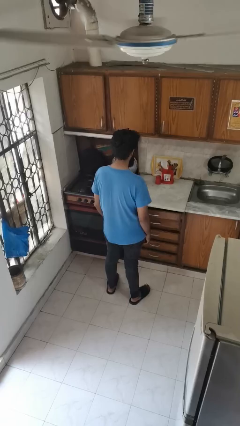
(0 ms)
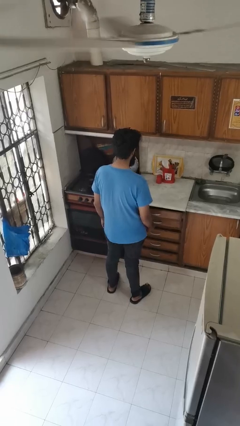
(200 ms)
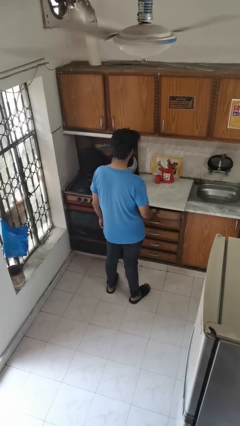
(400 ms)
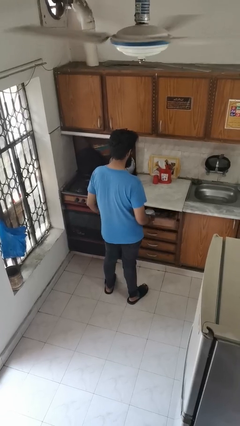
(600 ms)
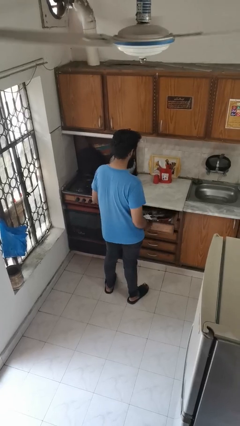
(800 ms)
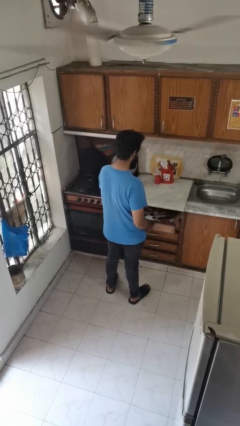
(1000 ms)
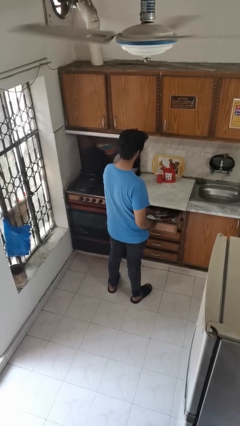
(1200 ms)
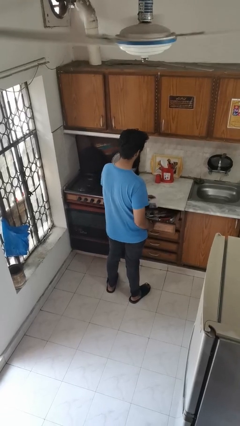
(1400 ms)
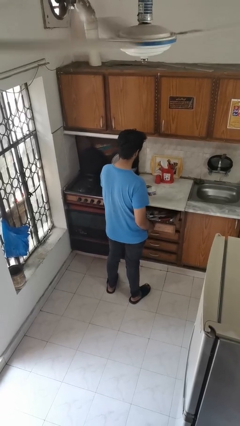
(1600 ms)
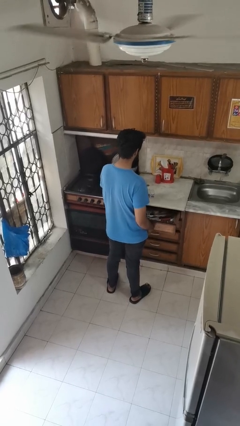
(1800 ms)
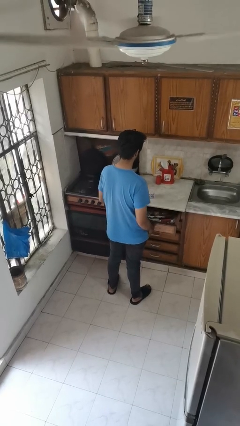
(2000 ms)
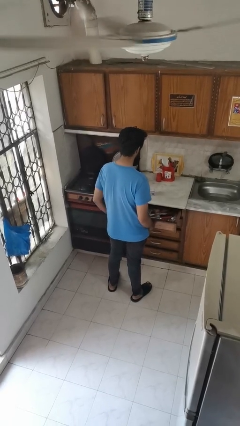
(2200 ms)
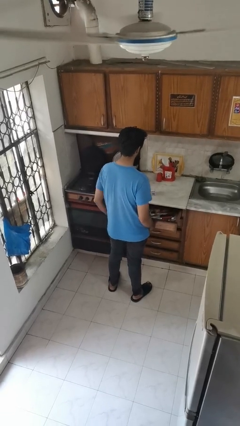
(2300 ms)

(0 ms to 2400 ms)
person takes object from kitchen drawer

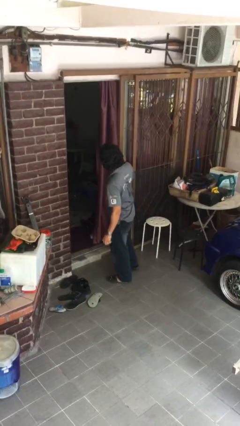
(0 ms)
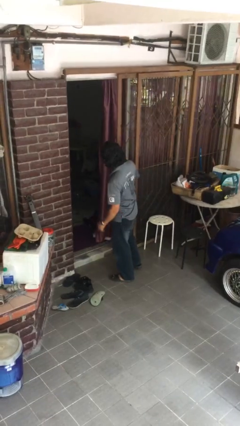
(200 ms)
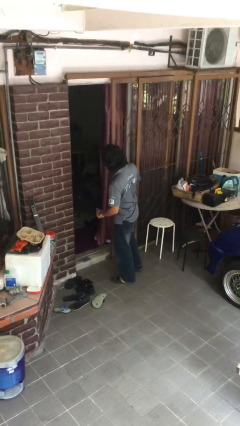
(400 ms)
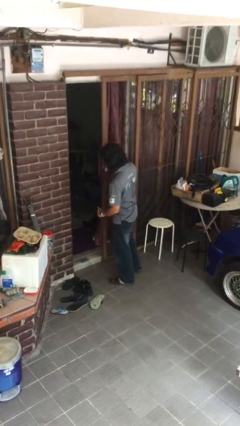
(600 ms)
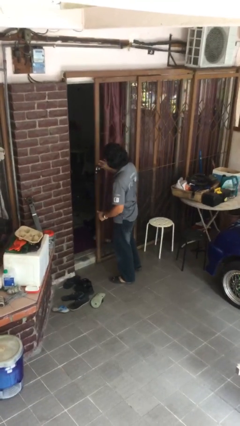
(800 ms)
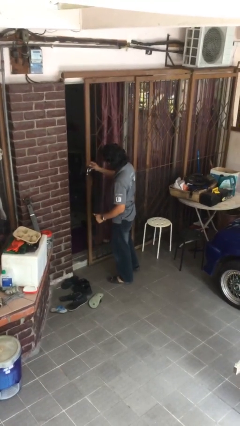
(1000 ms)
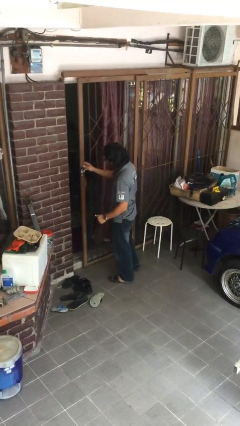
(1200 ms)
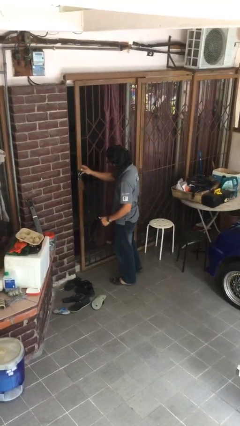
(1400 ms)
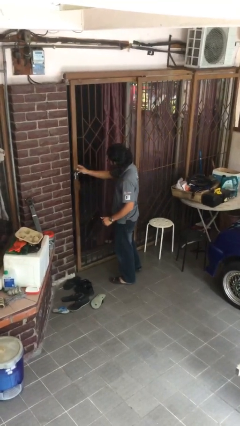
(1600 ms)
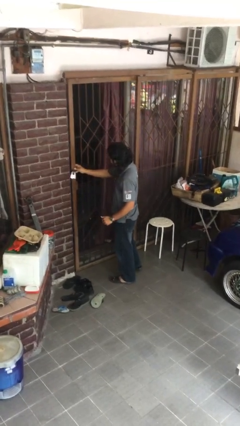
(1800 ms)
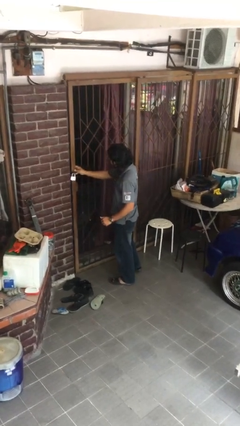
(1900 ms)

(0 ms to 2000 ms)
person closes facility door

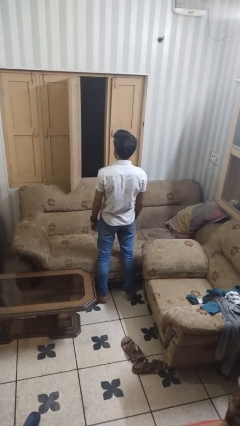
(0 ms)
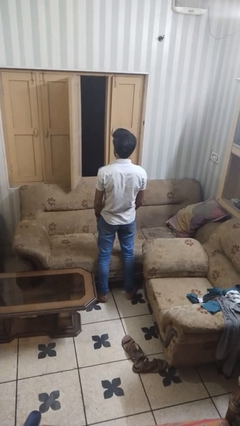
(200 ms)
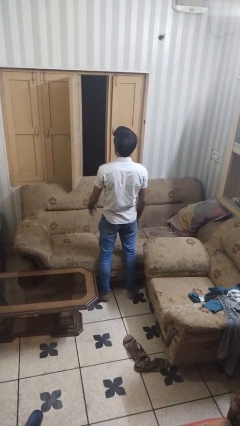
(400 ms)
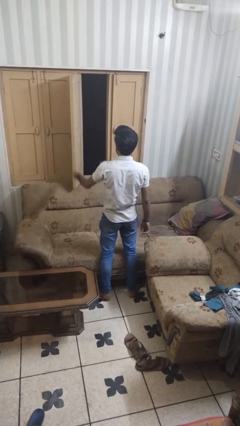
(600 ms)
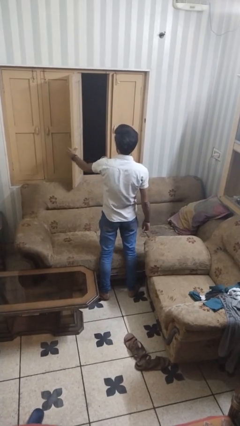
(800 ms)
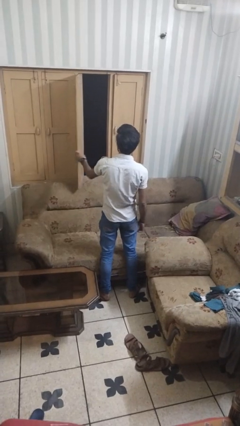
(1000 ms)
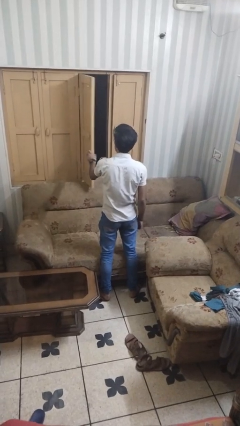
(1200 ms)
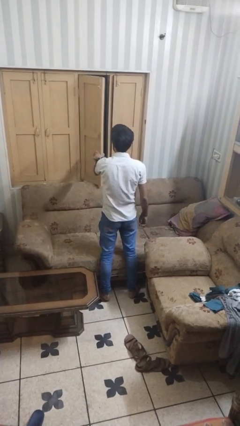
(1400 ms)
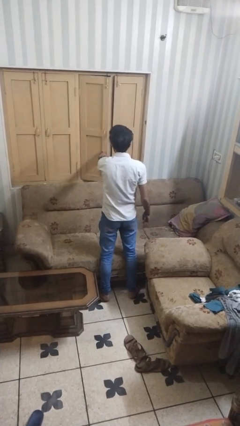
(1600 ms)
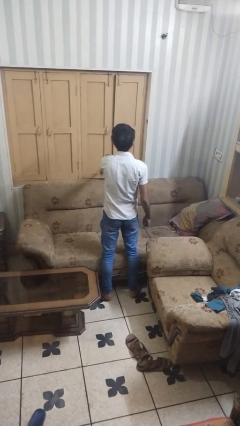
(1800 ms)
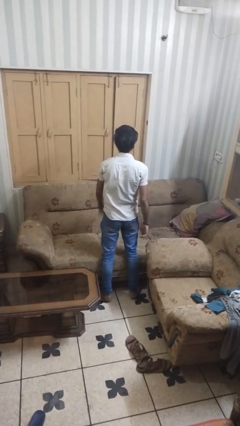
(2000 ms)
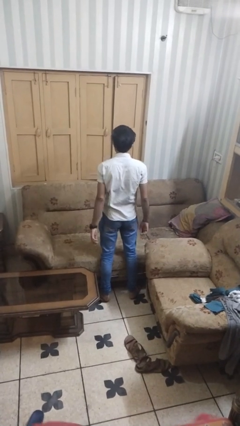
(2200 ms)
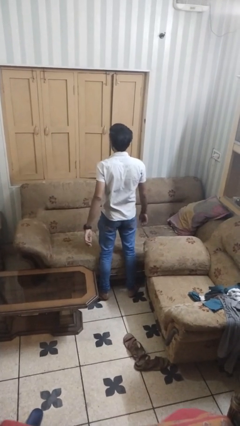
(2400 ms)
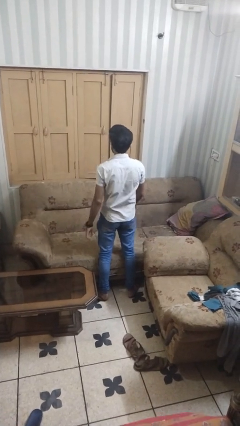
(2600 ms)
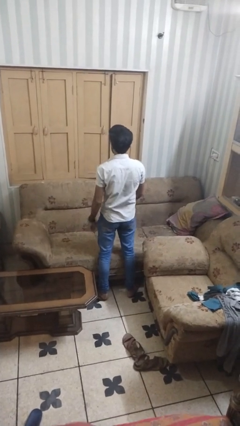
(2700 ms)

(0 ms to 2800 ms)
person closes home window

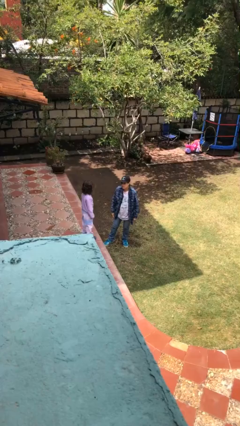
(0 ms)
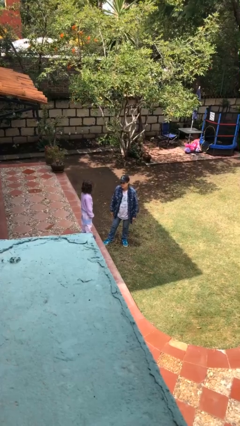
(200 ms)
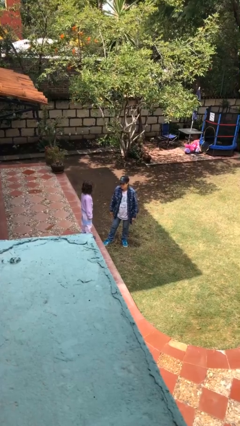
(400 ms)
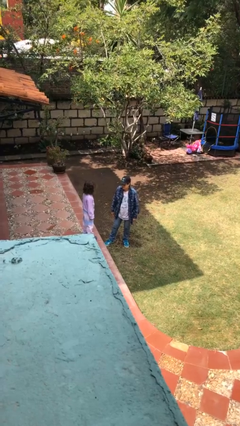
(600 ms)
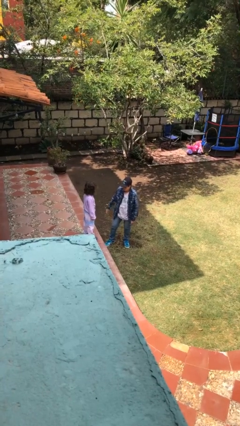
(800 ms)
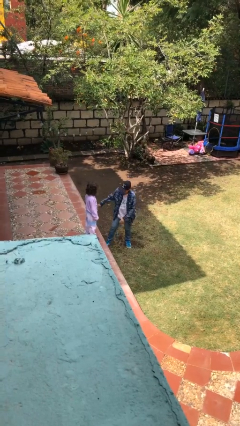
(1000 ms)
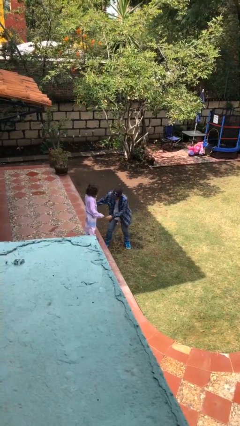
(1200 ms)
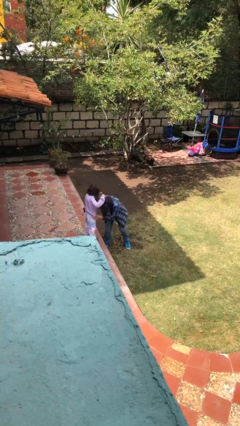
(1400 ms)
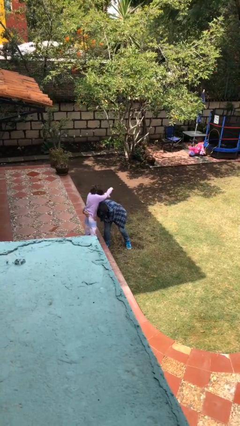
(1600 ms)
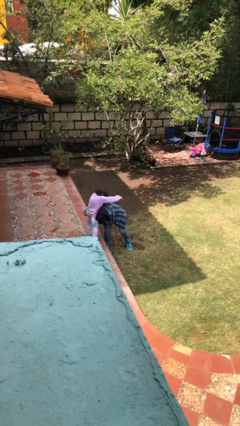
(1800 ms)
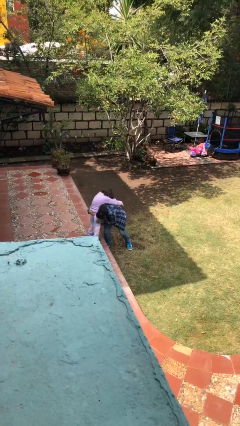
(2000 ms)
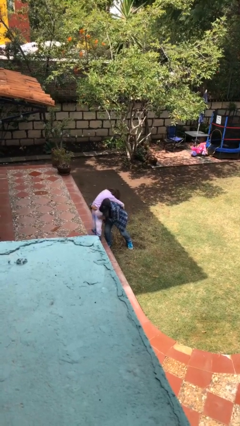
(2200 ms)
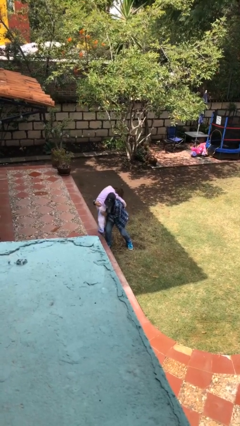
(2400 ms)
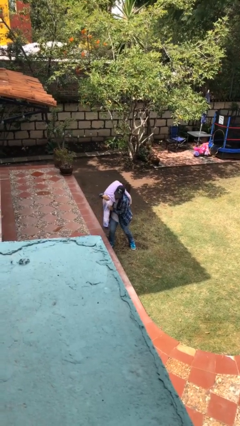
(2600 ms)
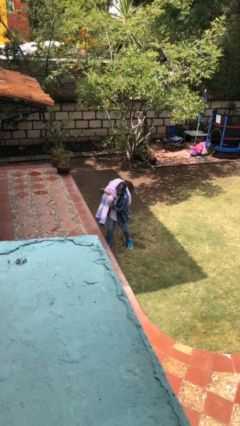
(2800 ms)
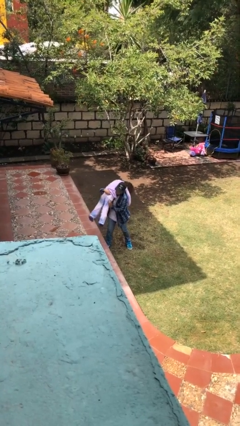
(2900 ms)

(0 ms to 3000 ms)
person carries person over shoulder

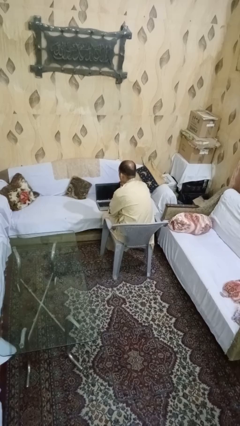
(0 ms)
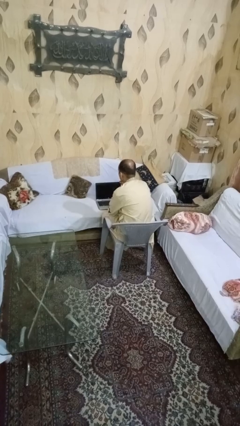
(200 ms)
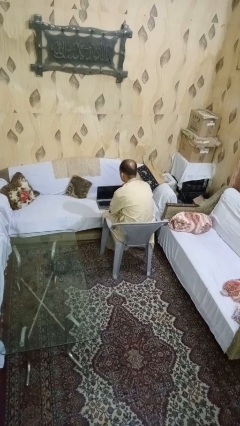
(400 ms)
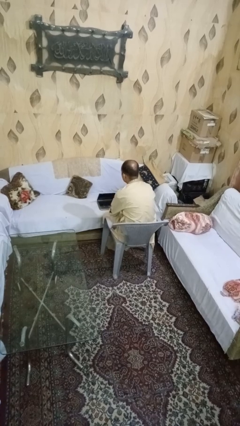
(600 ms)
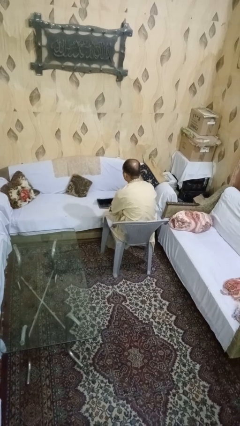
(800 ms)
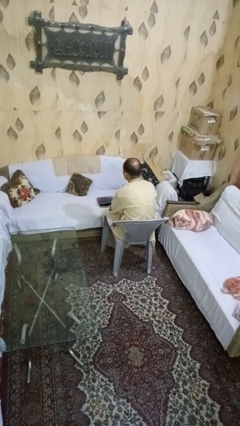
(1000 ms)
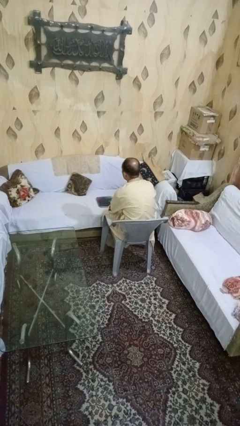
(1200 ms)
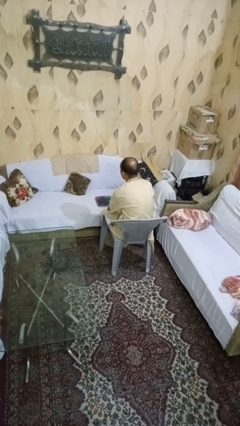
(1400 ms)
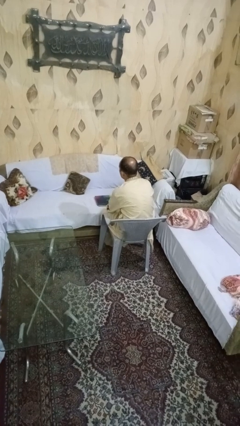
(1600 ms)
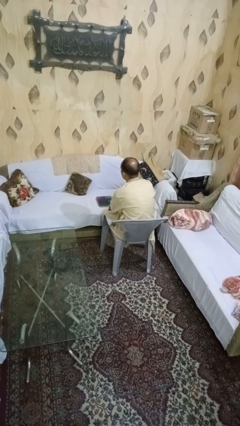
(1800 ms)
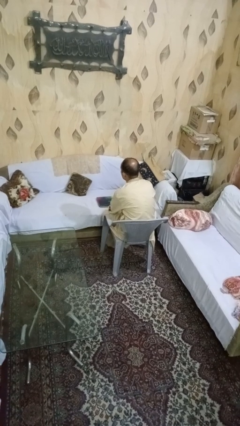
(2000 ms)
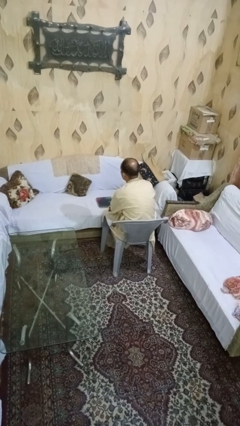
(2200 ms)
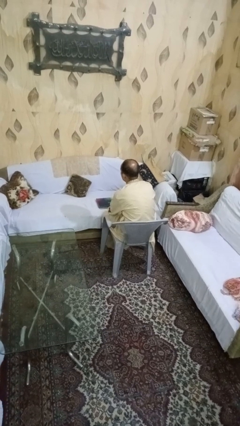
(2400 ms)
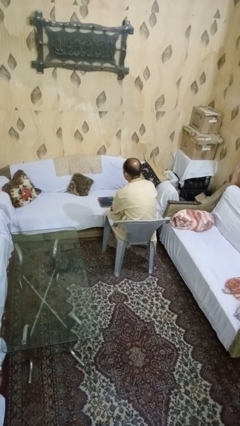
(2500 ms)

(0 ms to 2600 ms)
person closes laptop

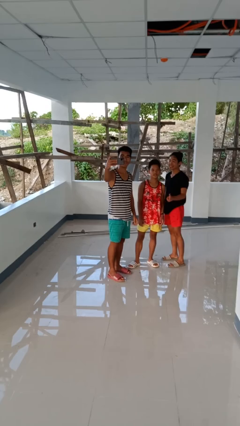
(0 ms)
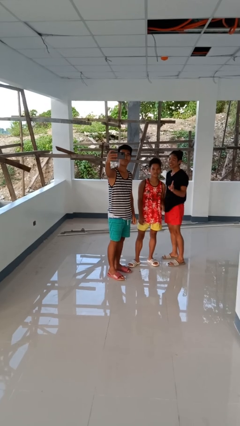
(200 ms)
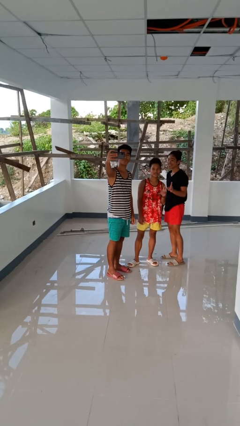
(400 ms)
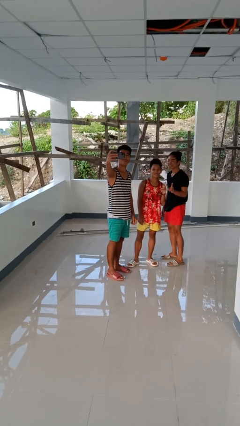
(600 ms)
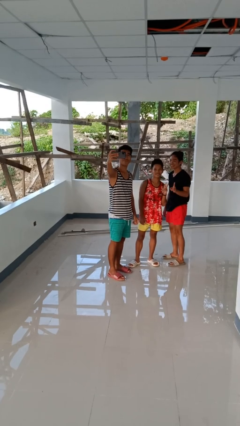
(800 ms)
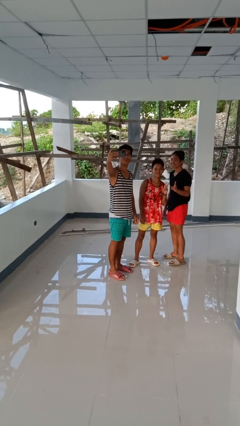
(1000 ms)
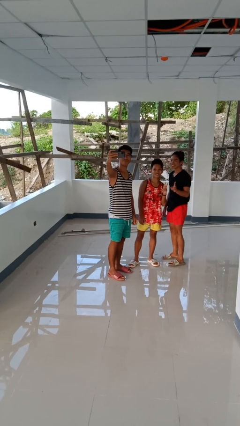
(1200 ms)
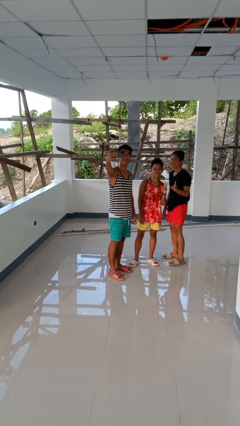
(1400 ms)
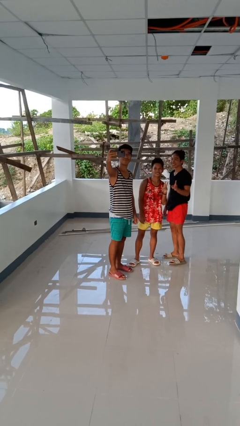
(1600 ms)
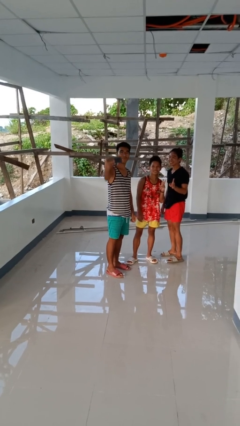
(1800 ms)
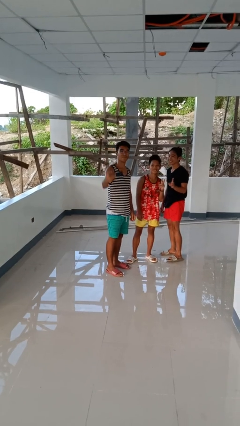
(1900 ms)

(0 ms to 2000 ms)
person takes selfie with person

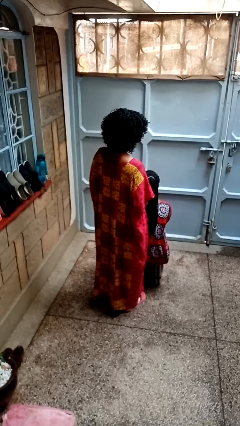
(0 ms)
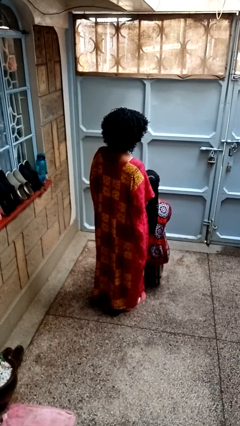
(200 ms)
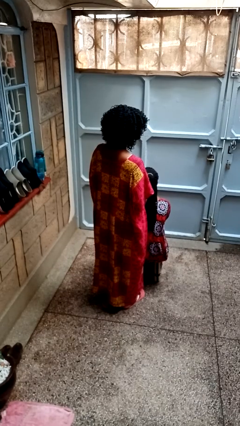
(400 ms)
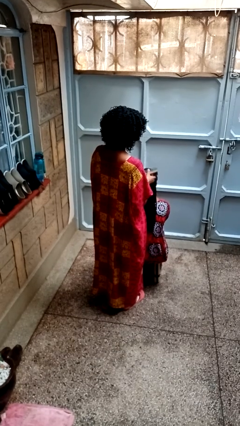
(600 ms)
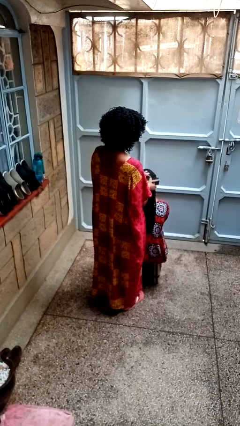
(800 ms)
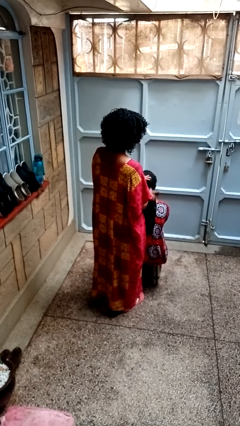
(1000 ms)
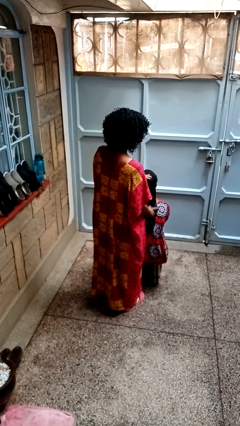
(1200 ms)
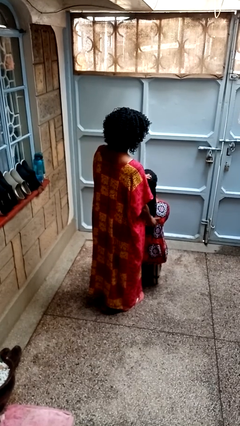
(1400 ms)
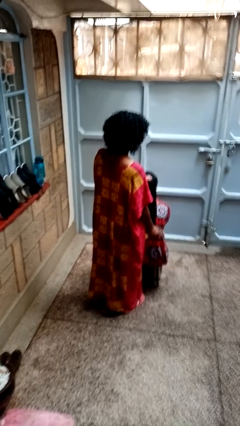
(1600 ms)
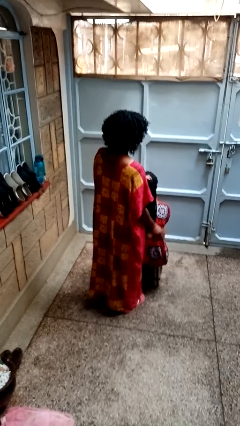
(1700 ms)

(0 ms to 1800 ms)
person brushes hair of person

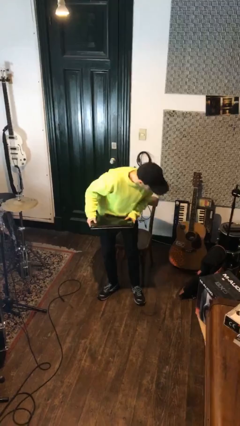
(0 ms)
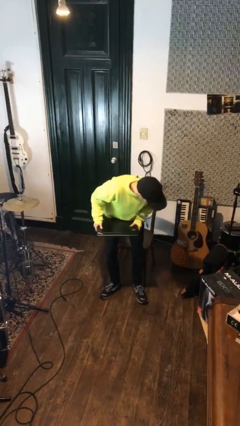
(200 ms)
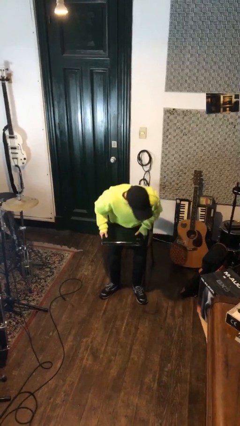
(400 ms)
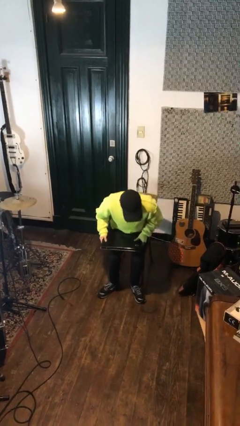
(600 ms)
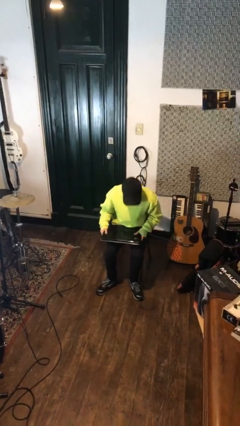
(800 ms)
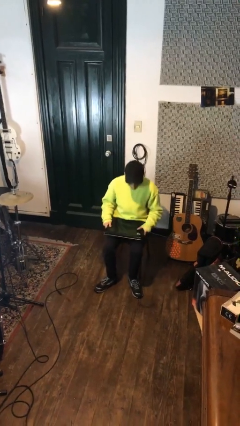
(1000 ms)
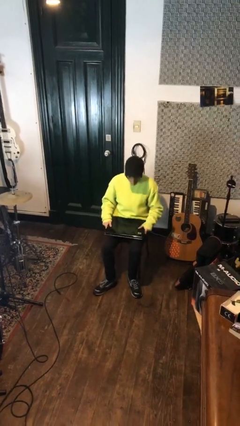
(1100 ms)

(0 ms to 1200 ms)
person sits down
